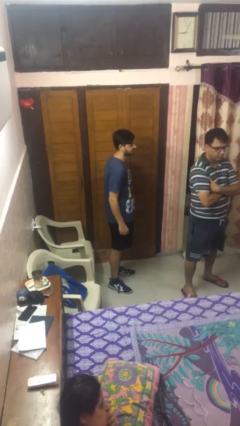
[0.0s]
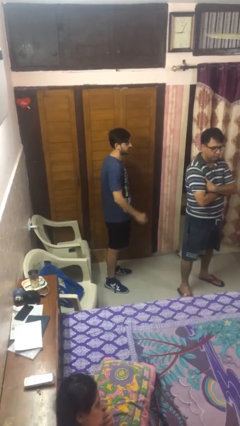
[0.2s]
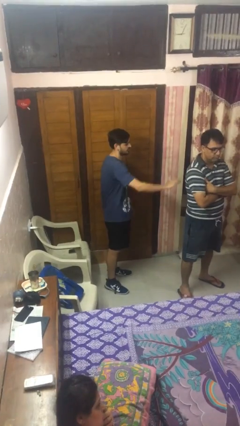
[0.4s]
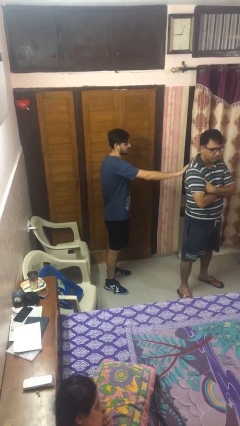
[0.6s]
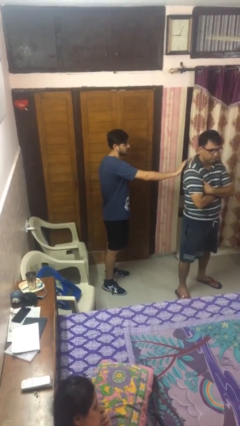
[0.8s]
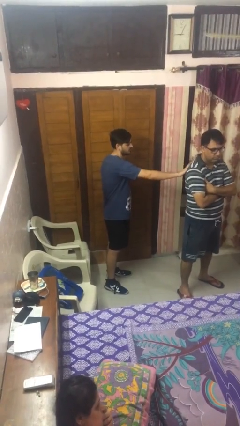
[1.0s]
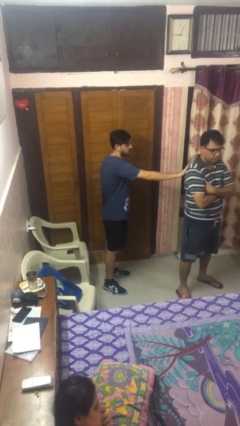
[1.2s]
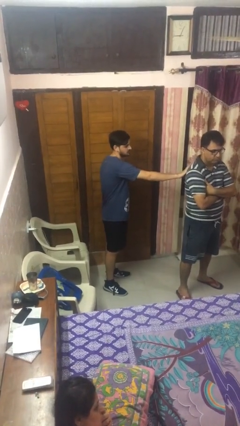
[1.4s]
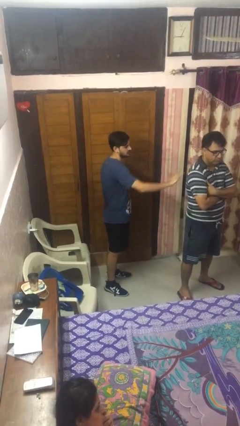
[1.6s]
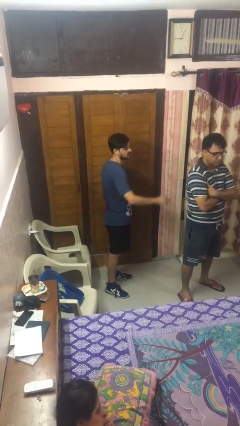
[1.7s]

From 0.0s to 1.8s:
person touches back of person

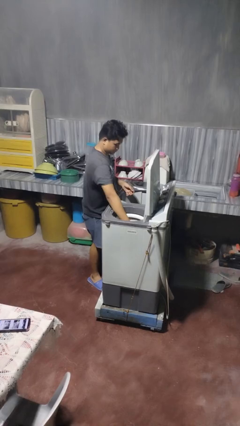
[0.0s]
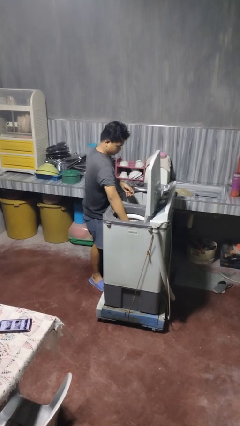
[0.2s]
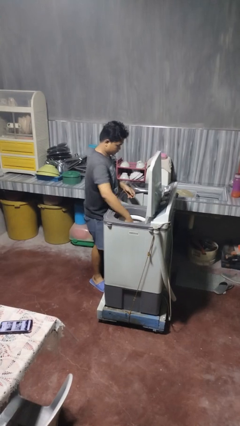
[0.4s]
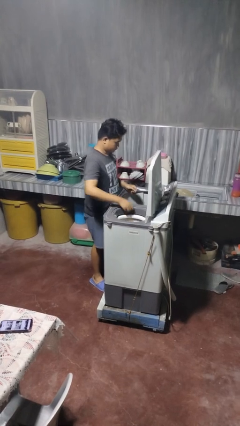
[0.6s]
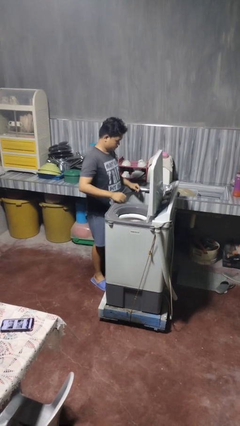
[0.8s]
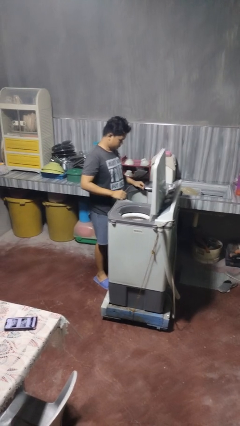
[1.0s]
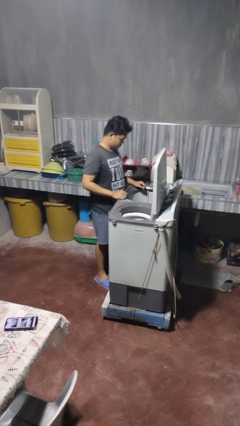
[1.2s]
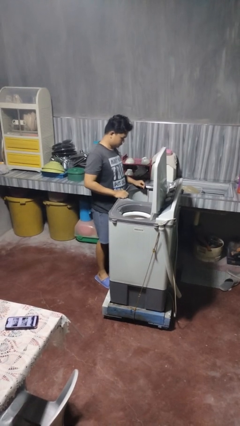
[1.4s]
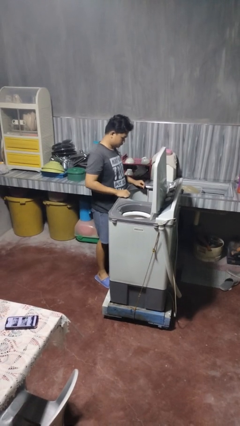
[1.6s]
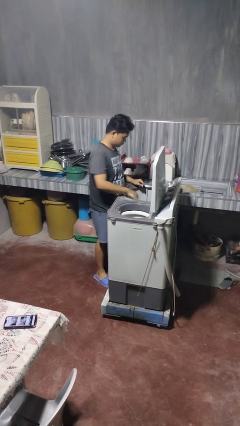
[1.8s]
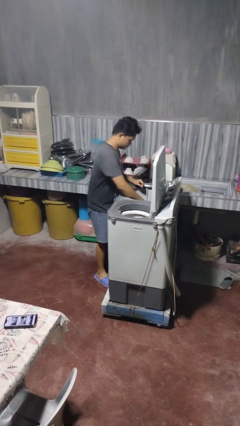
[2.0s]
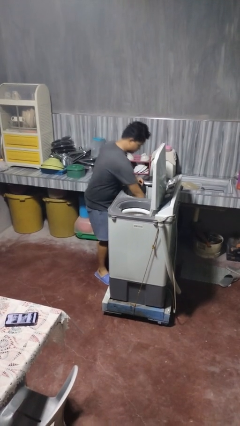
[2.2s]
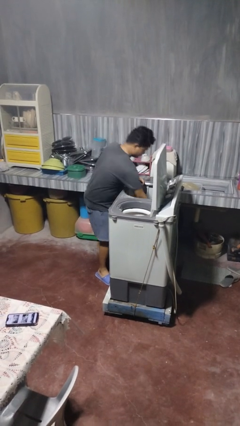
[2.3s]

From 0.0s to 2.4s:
person loads dryer

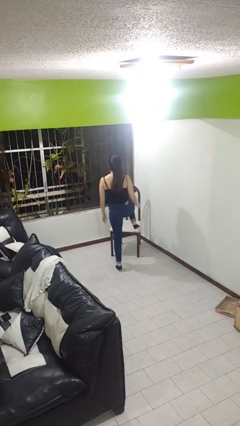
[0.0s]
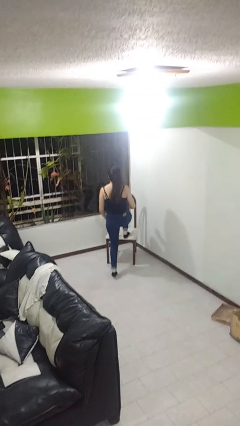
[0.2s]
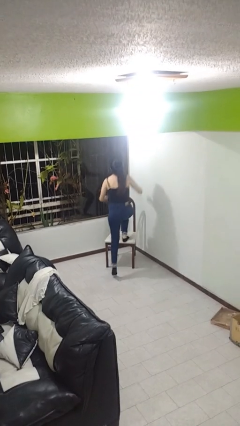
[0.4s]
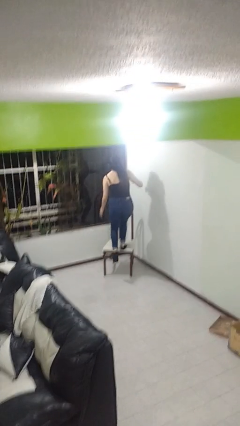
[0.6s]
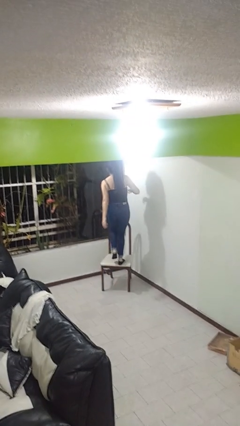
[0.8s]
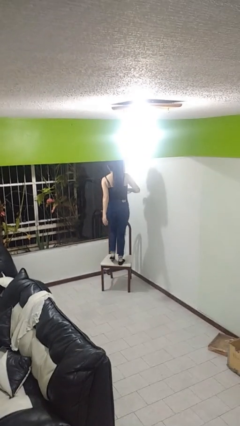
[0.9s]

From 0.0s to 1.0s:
person climbs on chair

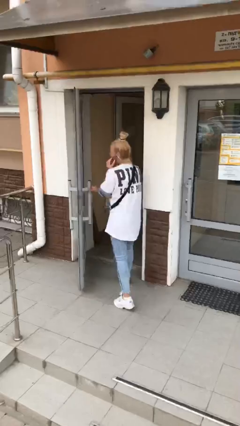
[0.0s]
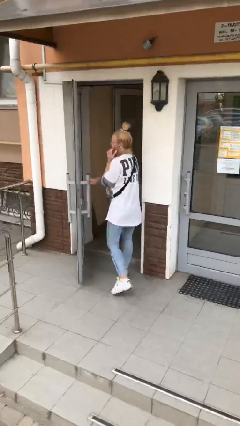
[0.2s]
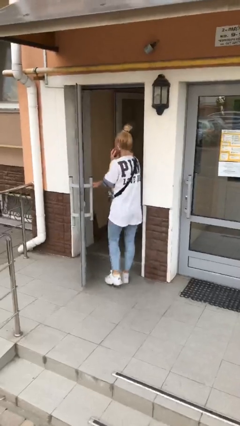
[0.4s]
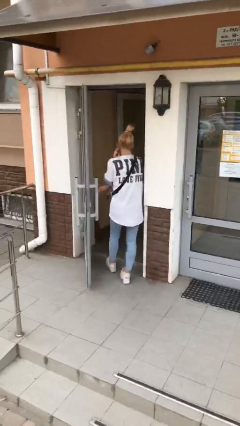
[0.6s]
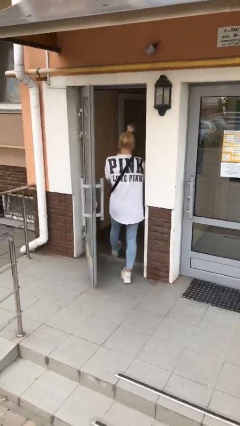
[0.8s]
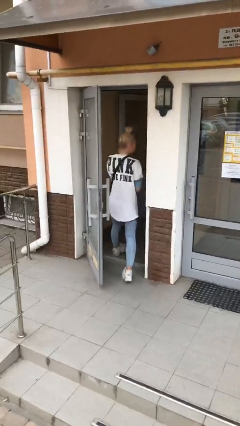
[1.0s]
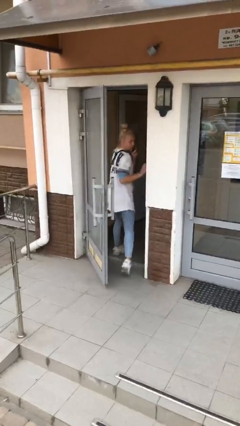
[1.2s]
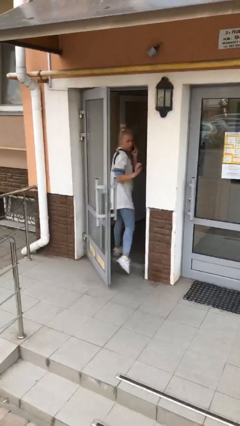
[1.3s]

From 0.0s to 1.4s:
person exits scene through structure

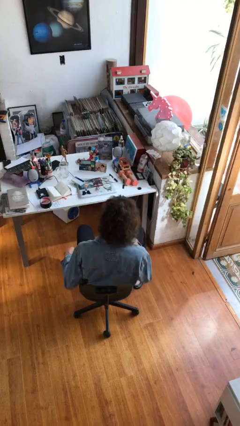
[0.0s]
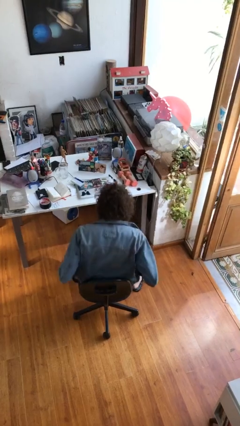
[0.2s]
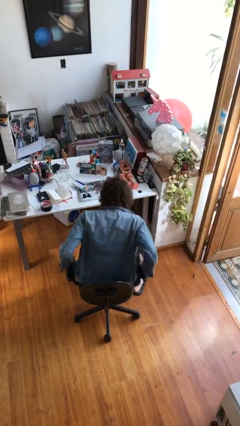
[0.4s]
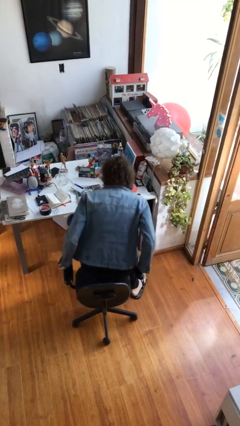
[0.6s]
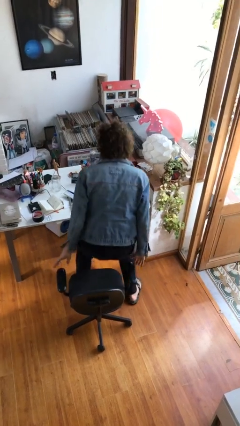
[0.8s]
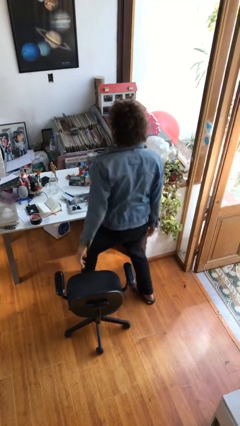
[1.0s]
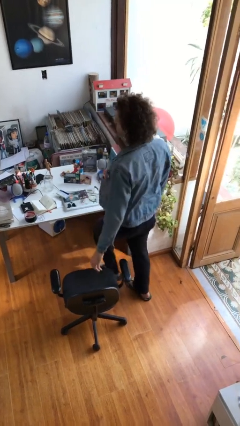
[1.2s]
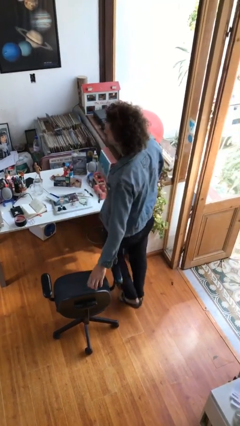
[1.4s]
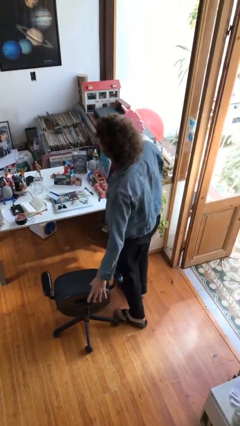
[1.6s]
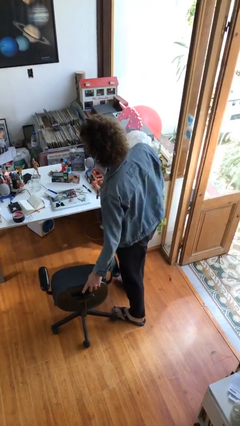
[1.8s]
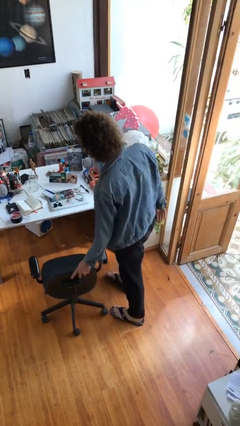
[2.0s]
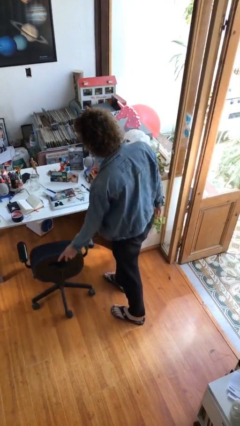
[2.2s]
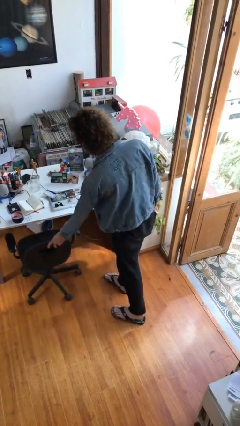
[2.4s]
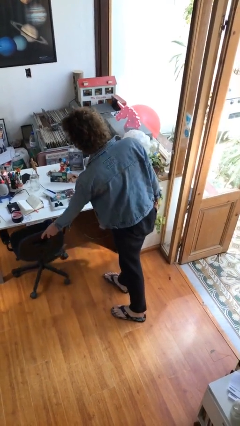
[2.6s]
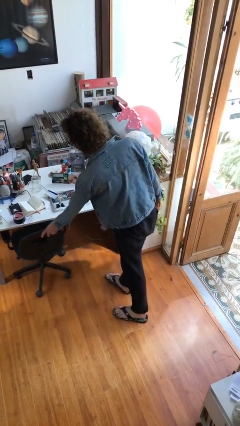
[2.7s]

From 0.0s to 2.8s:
person stands up

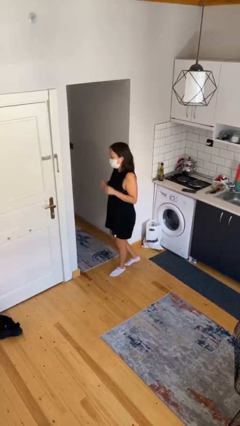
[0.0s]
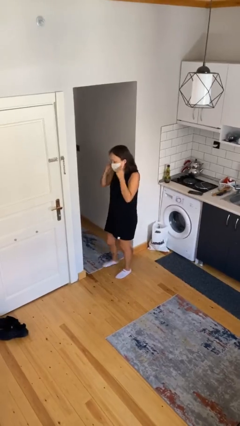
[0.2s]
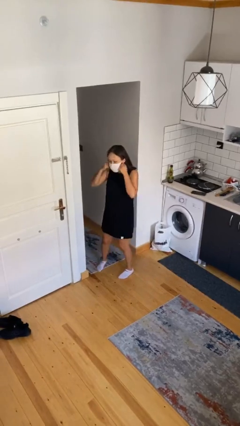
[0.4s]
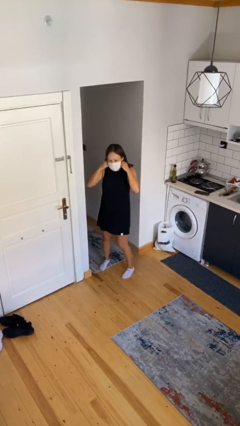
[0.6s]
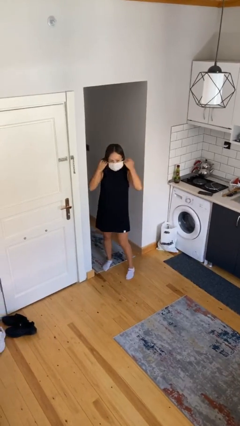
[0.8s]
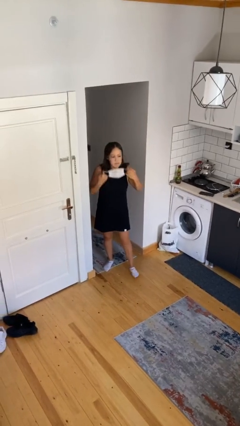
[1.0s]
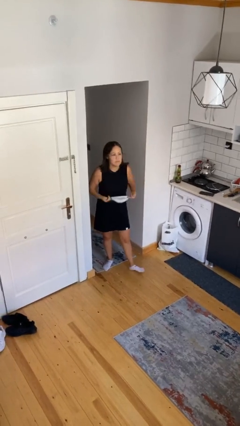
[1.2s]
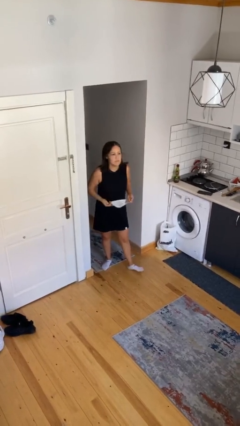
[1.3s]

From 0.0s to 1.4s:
person takes off facemask

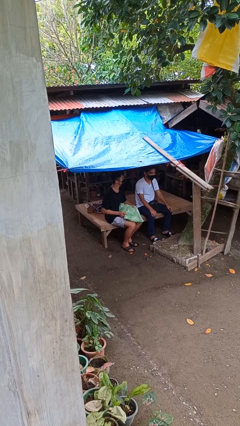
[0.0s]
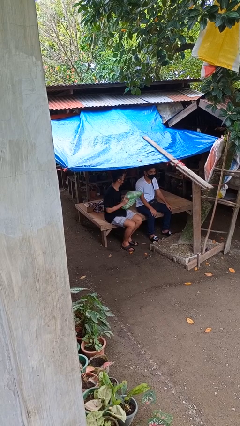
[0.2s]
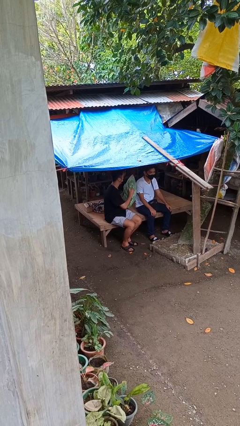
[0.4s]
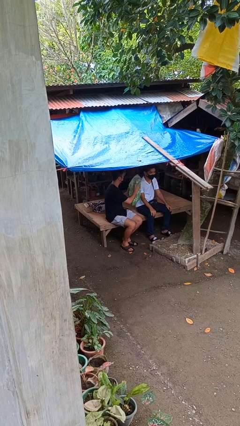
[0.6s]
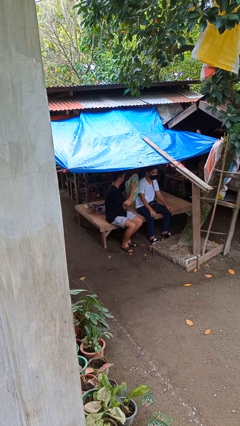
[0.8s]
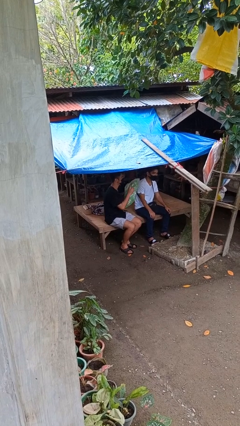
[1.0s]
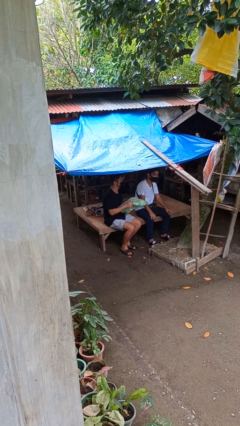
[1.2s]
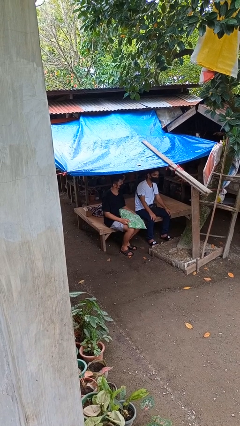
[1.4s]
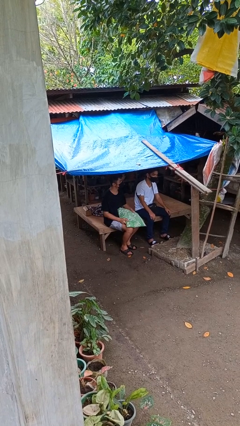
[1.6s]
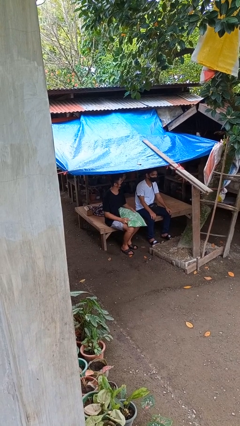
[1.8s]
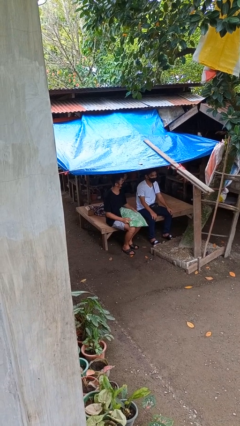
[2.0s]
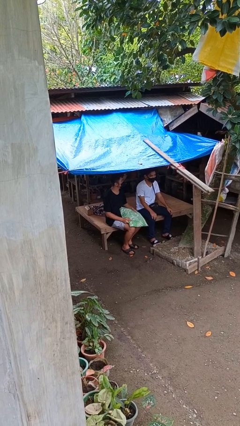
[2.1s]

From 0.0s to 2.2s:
person hits person with pillow

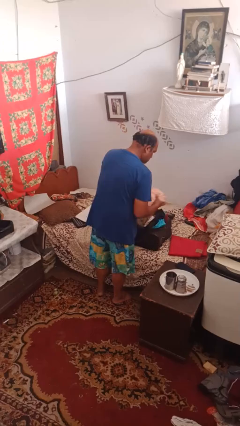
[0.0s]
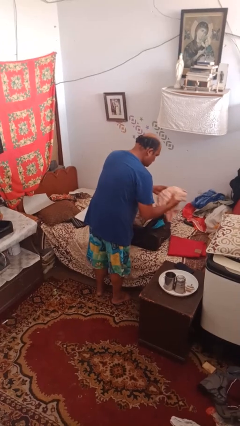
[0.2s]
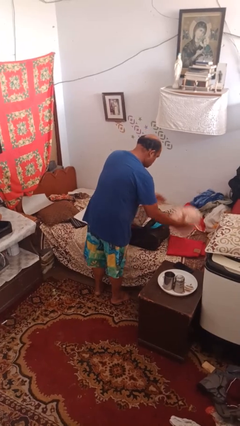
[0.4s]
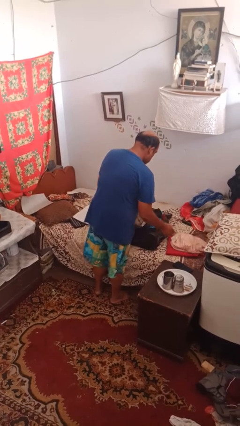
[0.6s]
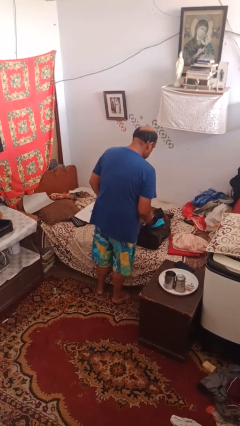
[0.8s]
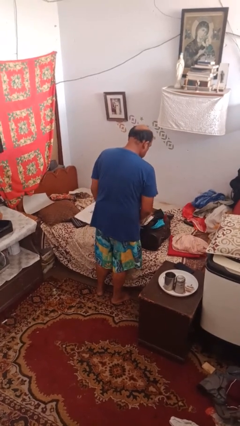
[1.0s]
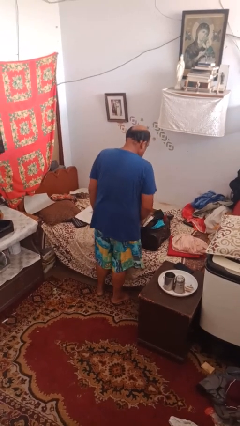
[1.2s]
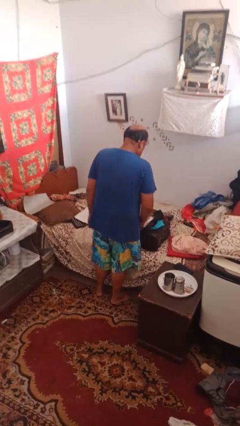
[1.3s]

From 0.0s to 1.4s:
person unloads clothes from suitcase

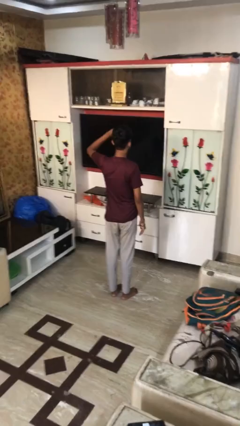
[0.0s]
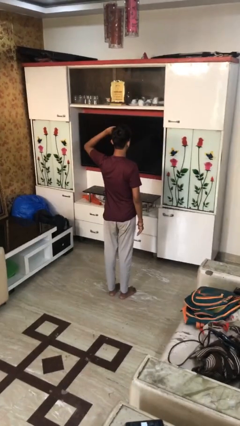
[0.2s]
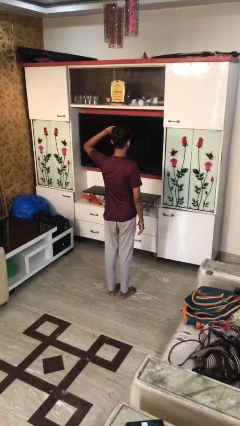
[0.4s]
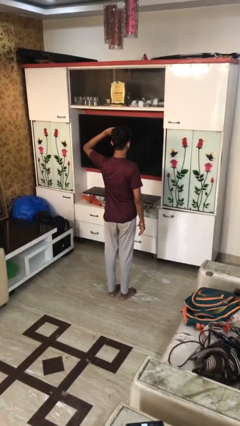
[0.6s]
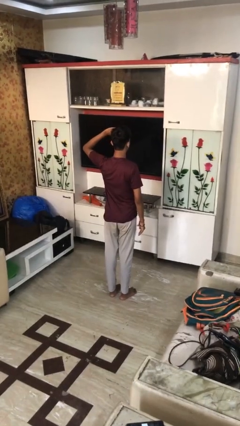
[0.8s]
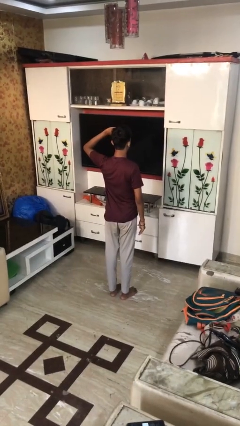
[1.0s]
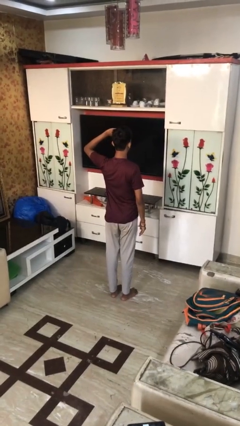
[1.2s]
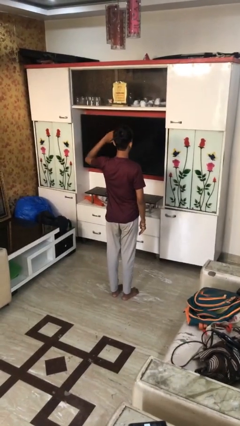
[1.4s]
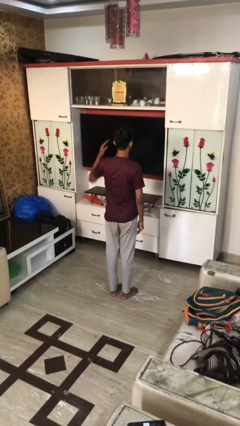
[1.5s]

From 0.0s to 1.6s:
person salutes

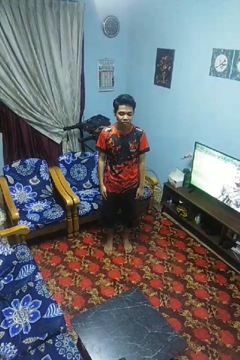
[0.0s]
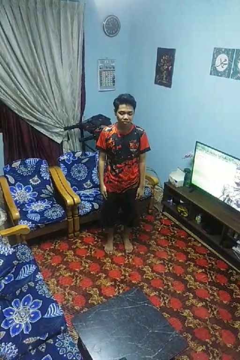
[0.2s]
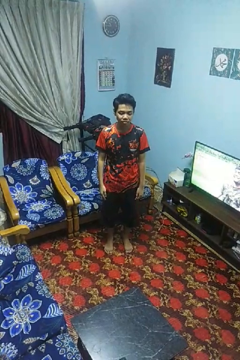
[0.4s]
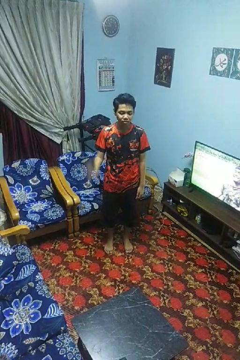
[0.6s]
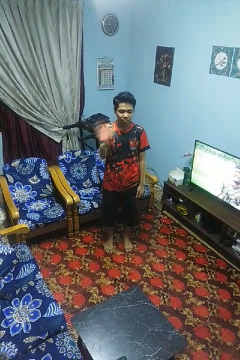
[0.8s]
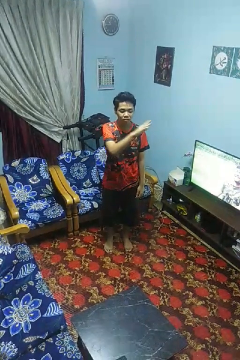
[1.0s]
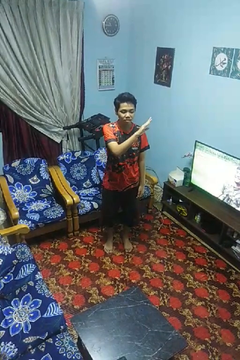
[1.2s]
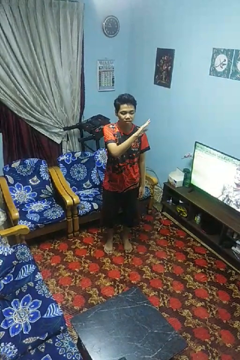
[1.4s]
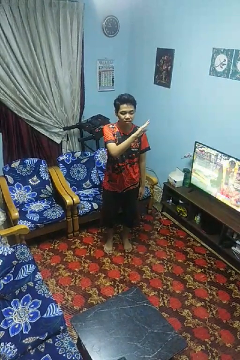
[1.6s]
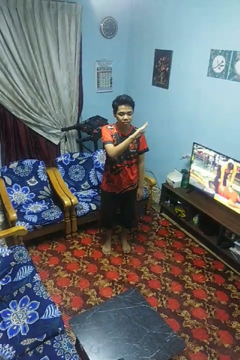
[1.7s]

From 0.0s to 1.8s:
person gestures swipe left
